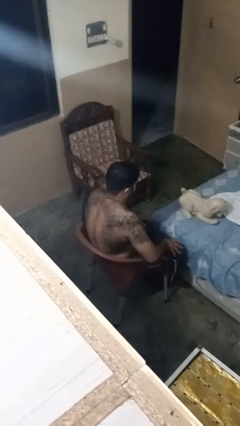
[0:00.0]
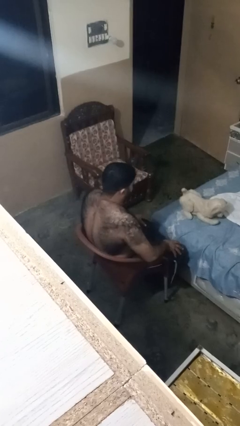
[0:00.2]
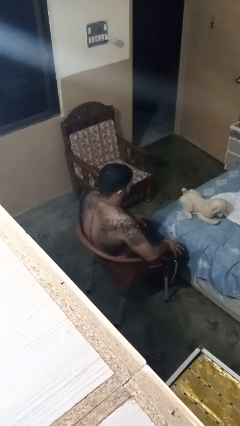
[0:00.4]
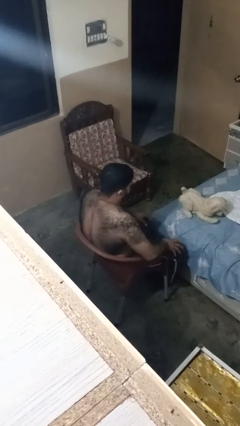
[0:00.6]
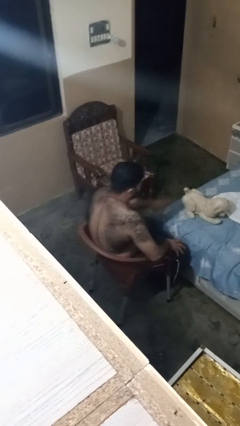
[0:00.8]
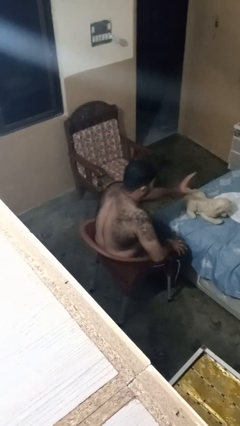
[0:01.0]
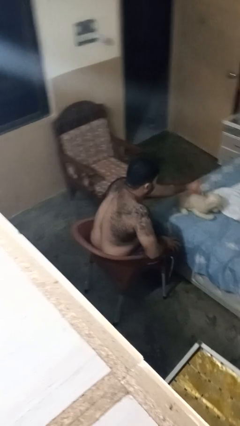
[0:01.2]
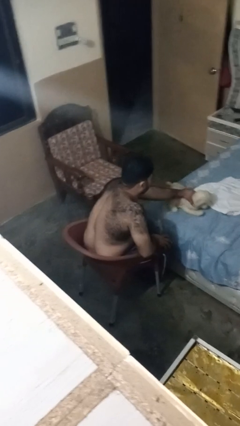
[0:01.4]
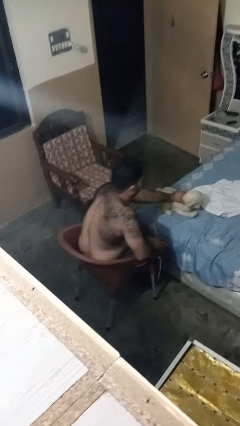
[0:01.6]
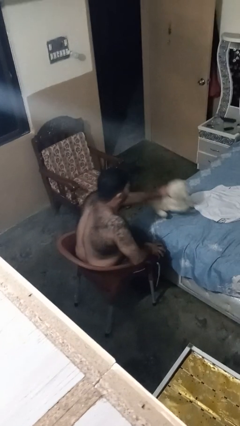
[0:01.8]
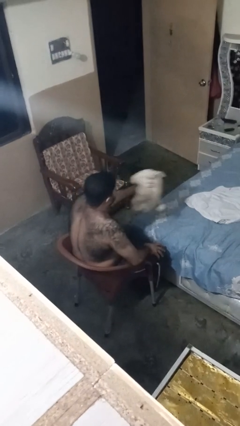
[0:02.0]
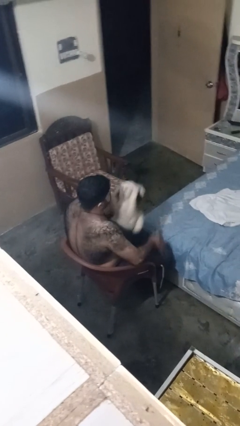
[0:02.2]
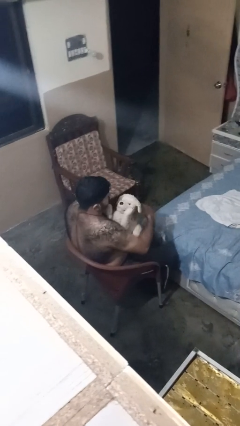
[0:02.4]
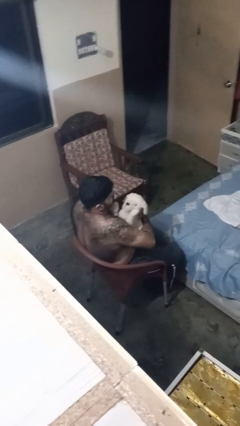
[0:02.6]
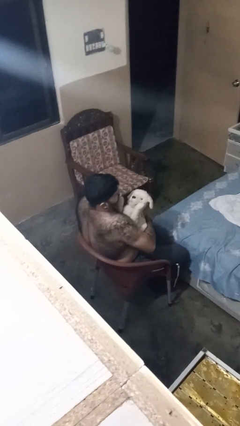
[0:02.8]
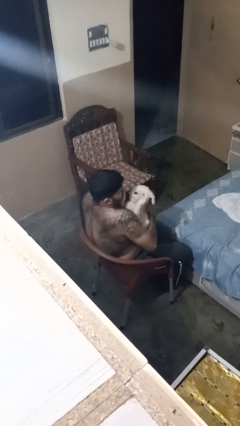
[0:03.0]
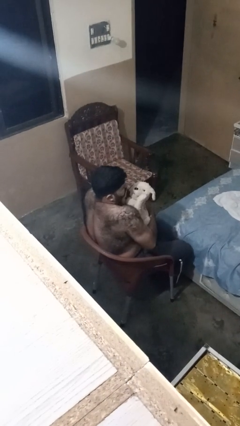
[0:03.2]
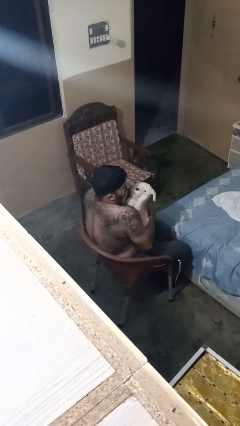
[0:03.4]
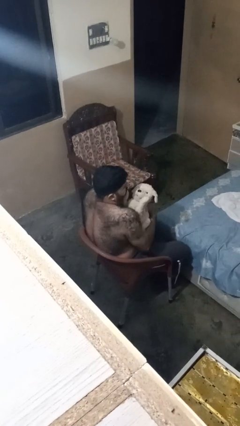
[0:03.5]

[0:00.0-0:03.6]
person hugs stuffed animal

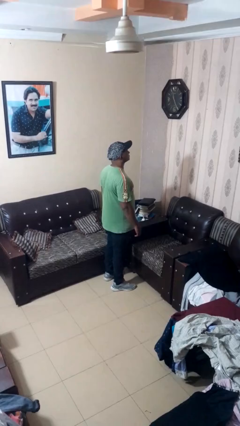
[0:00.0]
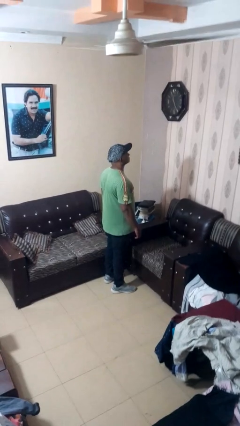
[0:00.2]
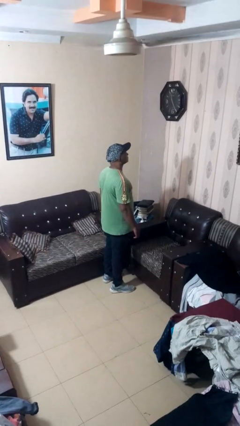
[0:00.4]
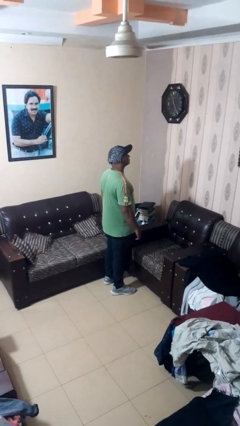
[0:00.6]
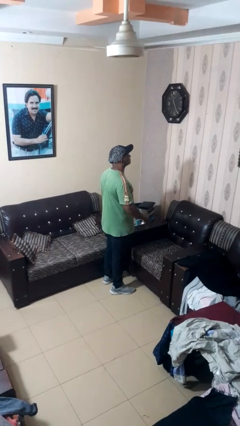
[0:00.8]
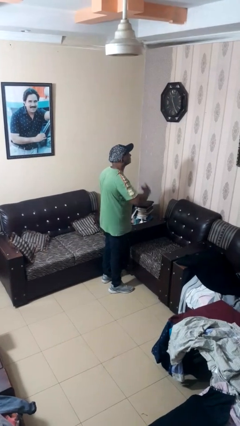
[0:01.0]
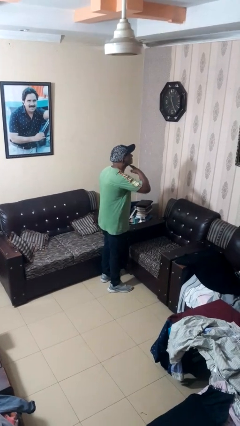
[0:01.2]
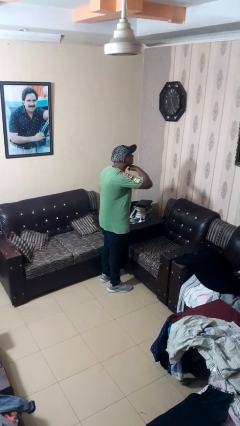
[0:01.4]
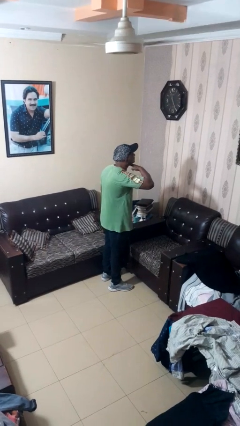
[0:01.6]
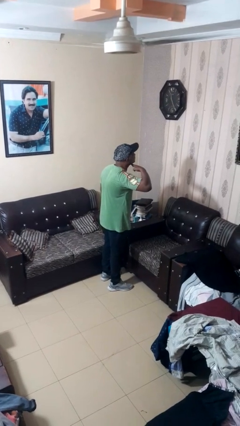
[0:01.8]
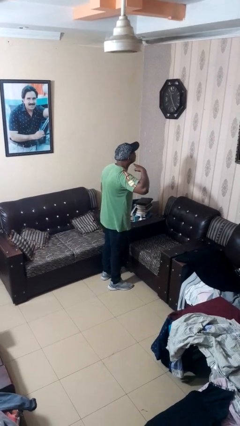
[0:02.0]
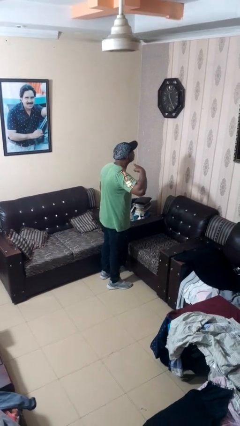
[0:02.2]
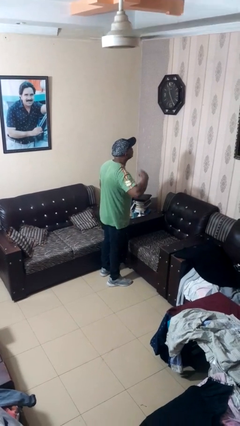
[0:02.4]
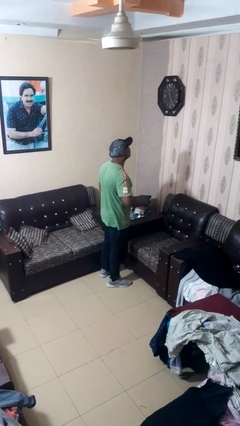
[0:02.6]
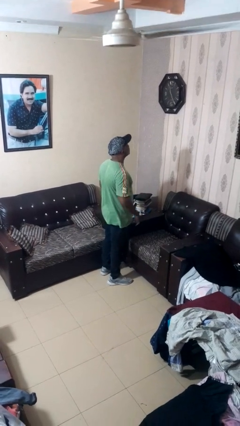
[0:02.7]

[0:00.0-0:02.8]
person gestures cut

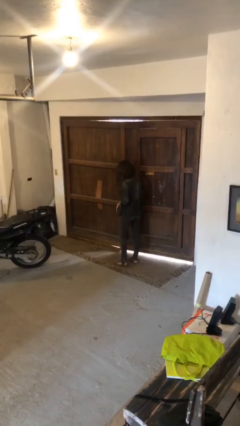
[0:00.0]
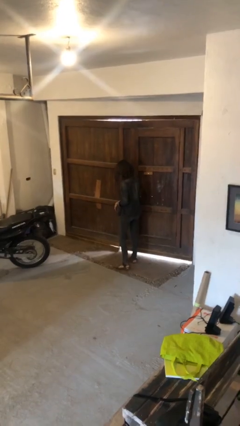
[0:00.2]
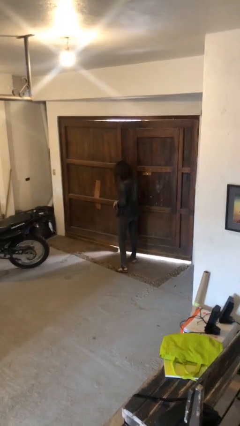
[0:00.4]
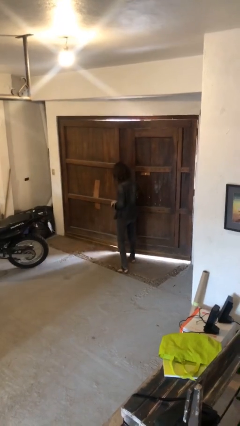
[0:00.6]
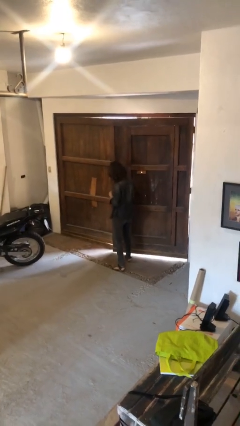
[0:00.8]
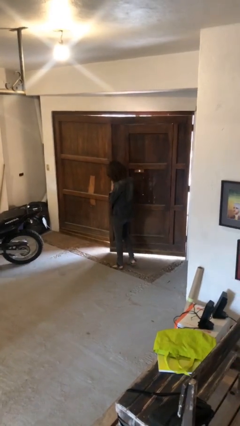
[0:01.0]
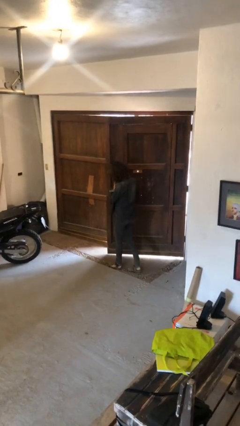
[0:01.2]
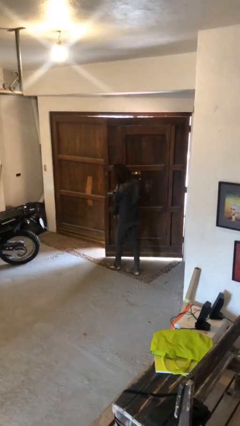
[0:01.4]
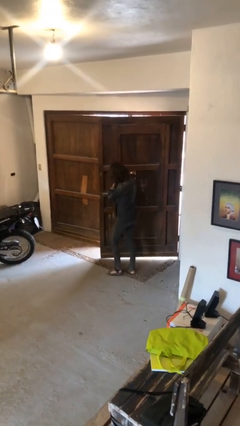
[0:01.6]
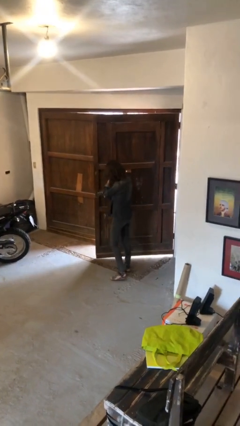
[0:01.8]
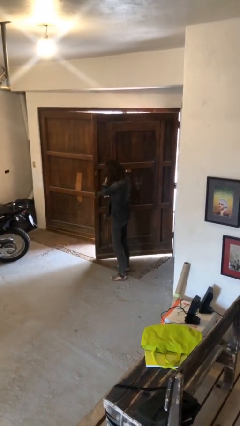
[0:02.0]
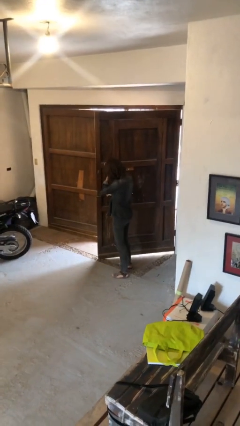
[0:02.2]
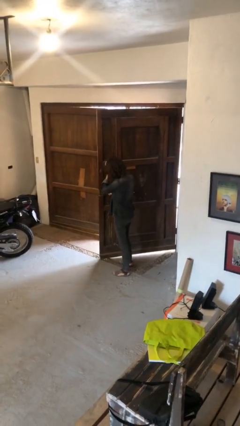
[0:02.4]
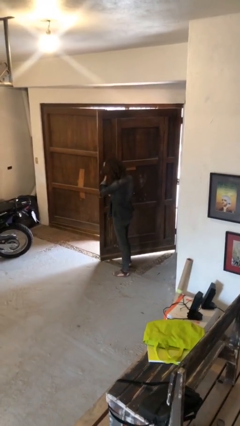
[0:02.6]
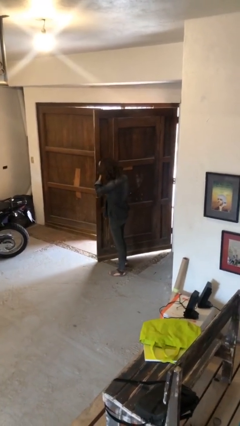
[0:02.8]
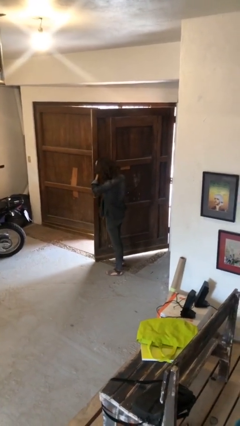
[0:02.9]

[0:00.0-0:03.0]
person opens gate

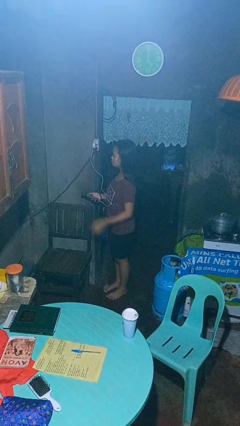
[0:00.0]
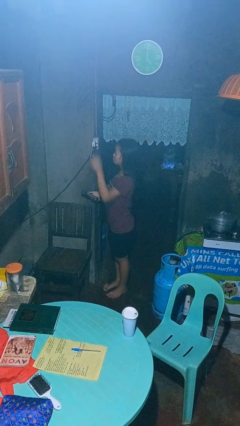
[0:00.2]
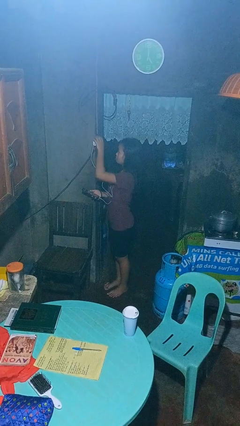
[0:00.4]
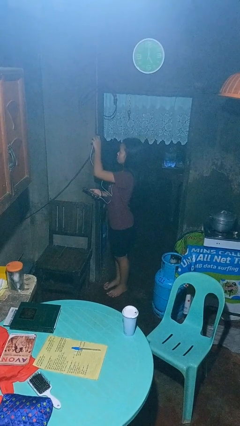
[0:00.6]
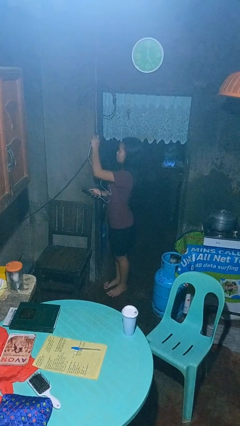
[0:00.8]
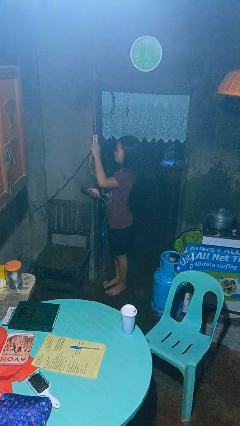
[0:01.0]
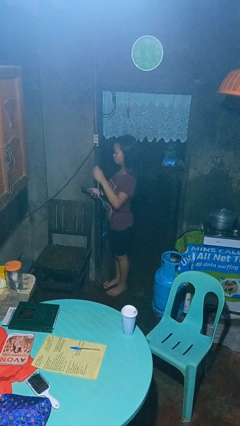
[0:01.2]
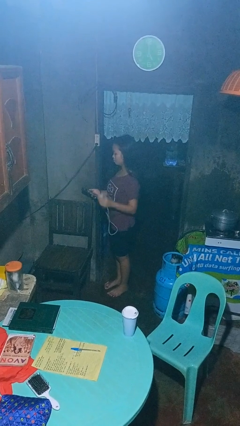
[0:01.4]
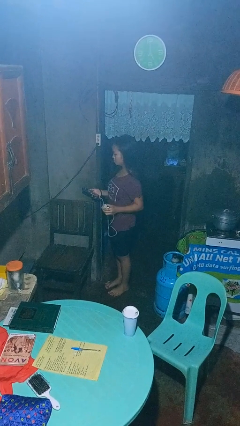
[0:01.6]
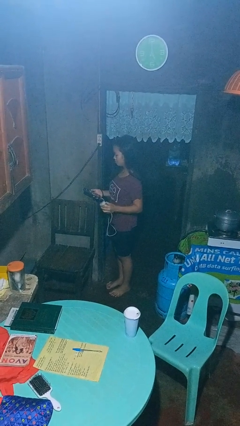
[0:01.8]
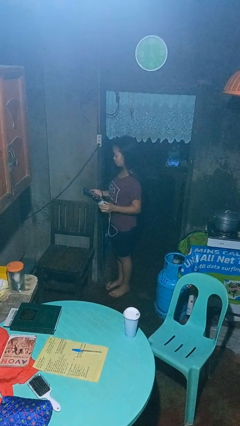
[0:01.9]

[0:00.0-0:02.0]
person unplugs from electrical socket

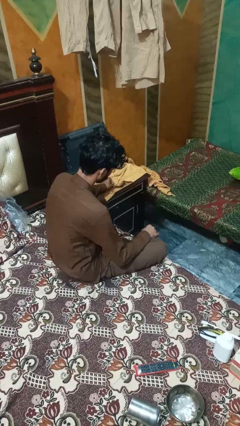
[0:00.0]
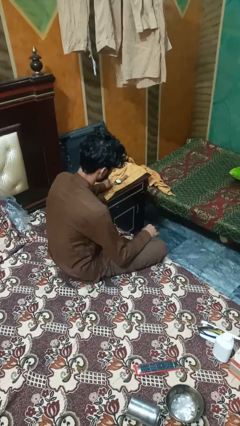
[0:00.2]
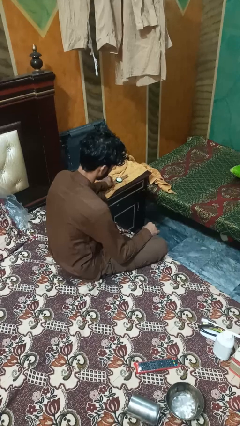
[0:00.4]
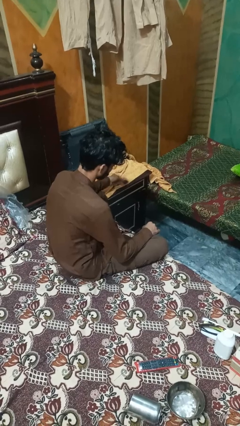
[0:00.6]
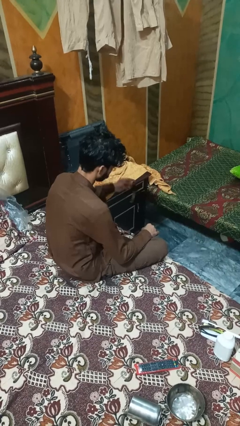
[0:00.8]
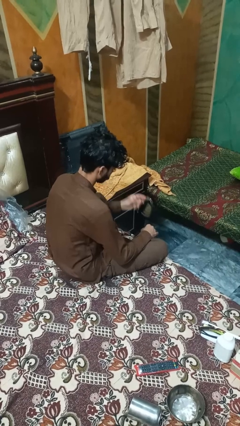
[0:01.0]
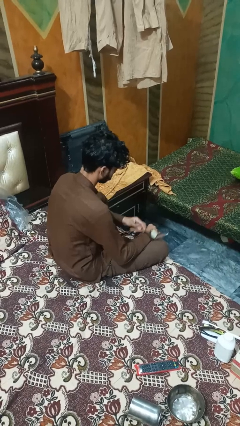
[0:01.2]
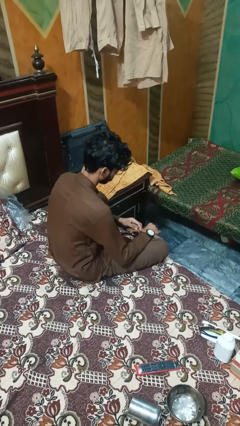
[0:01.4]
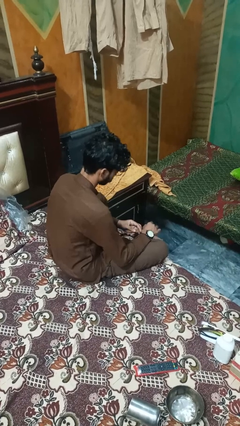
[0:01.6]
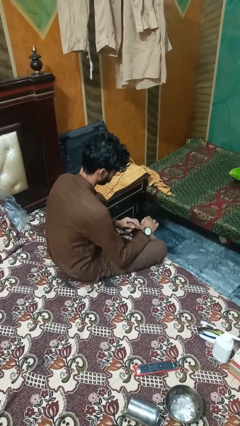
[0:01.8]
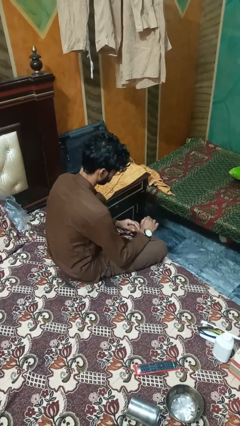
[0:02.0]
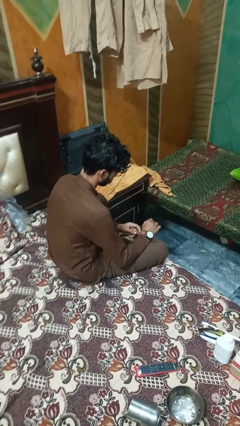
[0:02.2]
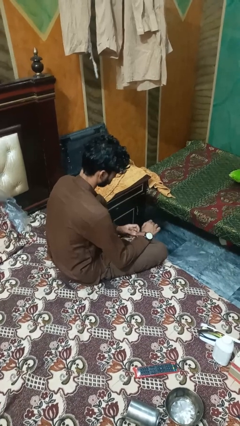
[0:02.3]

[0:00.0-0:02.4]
person puts on wristwatch

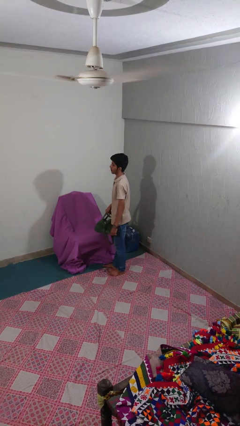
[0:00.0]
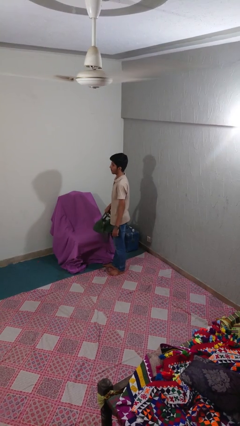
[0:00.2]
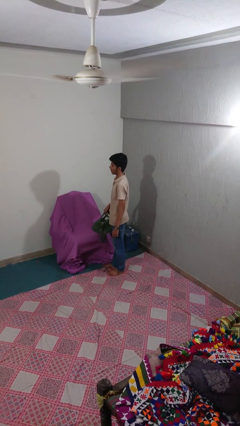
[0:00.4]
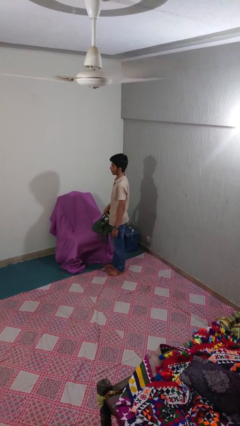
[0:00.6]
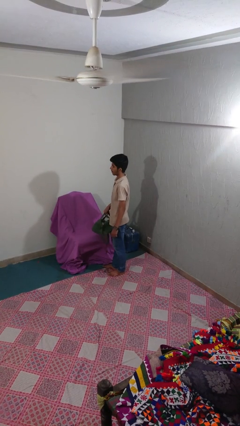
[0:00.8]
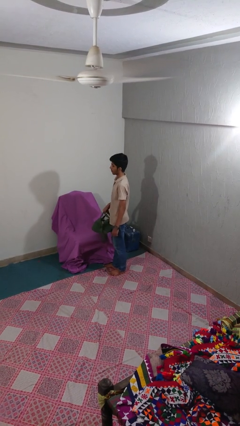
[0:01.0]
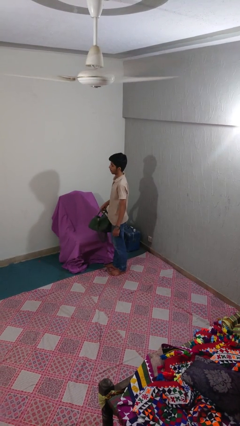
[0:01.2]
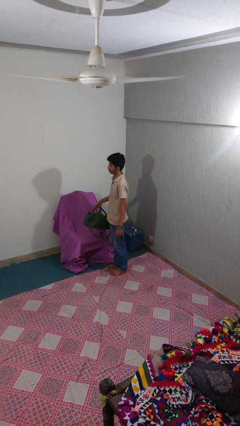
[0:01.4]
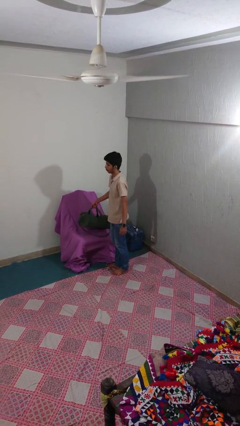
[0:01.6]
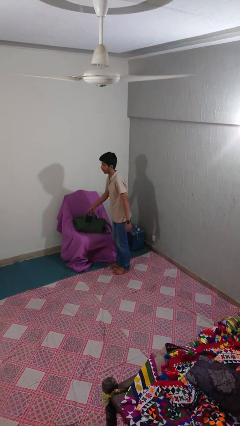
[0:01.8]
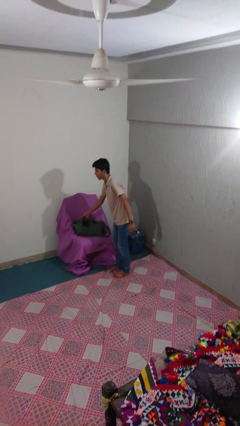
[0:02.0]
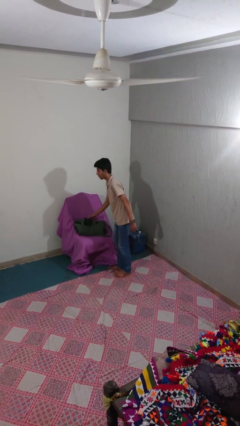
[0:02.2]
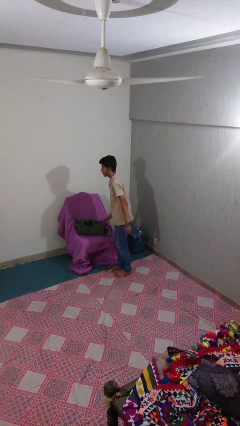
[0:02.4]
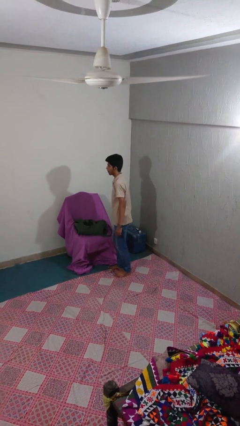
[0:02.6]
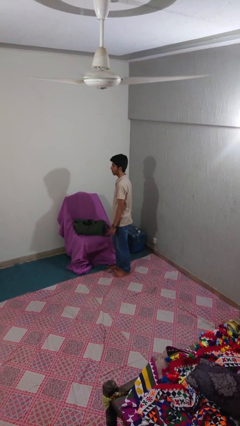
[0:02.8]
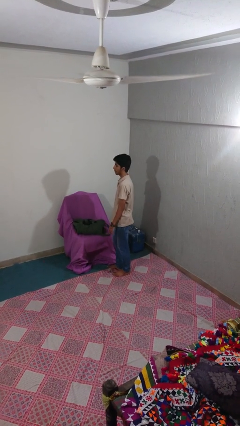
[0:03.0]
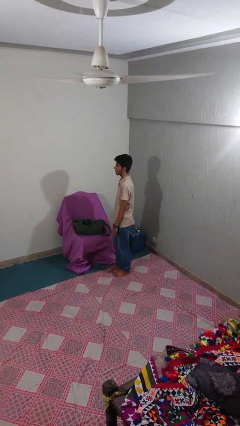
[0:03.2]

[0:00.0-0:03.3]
person puts down object on couch
